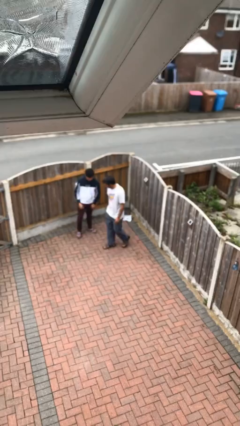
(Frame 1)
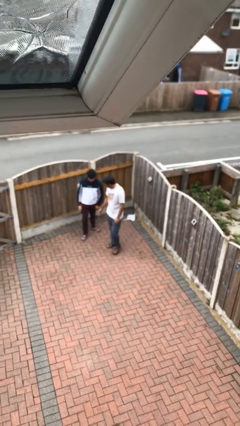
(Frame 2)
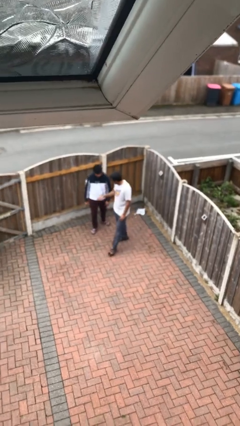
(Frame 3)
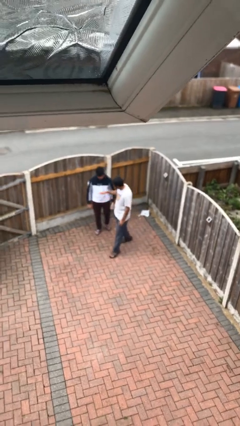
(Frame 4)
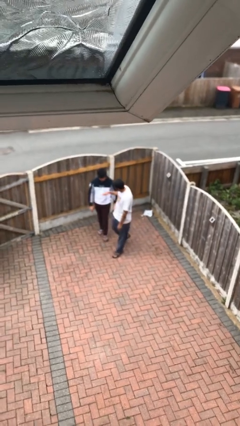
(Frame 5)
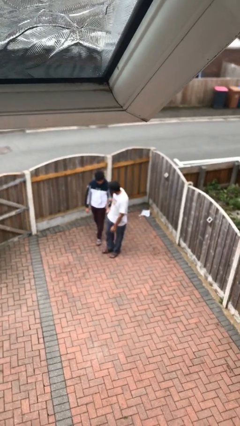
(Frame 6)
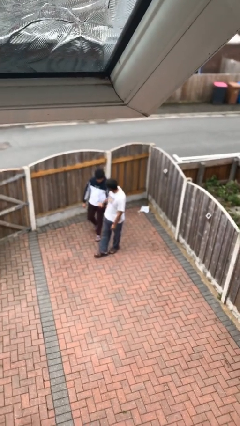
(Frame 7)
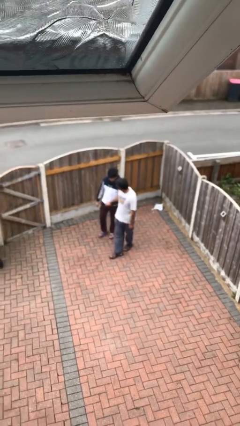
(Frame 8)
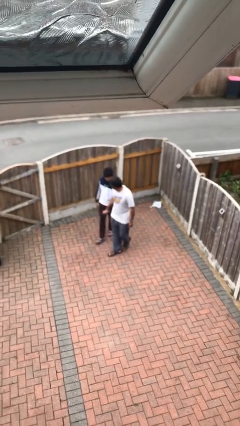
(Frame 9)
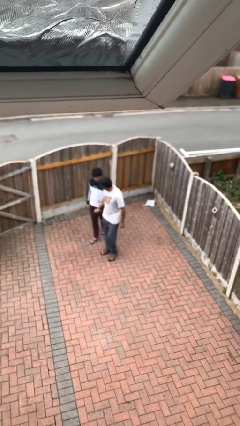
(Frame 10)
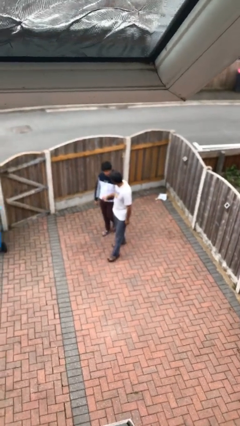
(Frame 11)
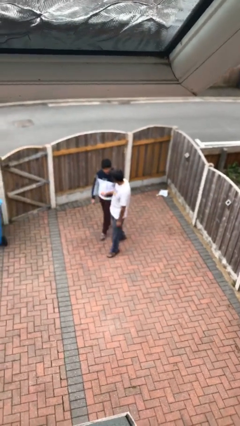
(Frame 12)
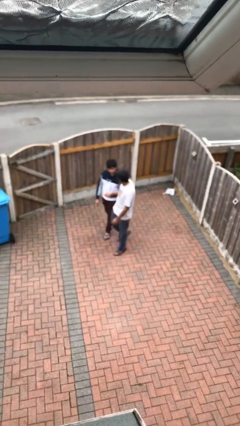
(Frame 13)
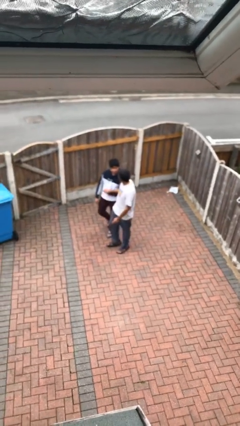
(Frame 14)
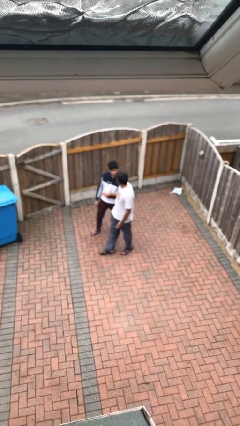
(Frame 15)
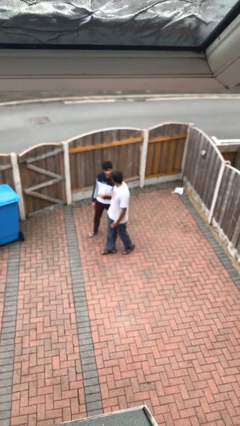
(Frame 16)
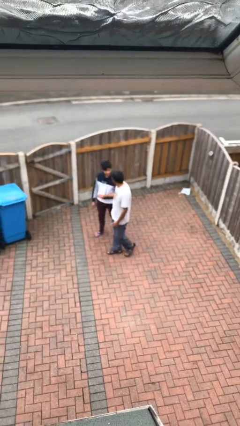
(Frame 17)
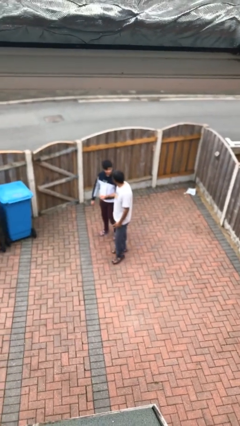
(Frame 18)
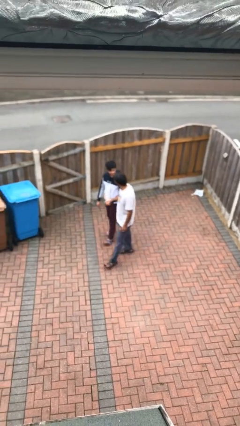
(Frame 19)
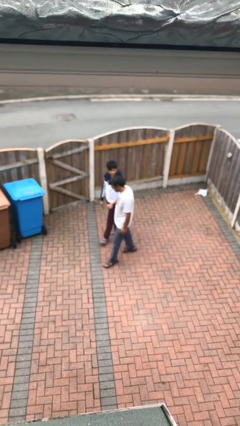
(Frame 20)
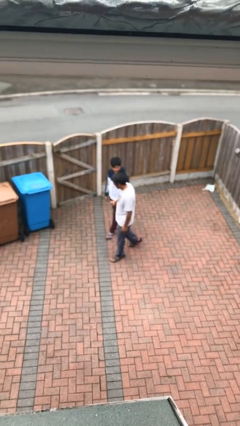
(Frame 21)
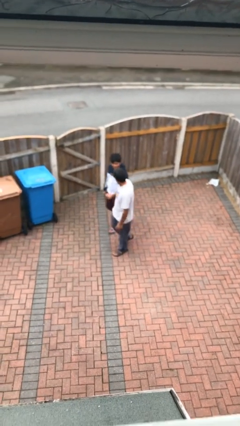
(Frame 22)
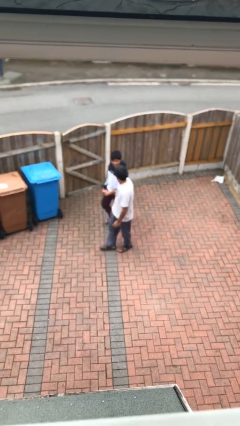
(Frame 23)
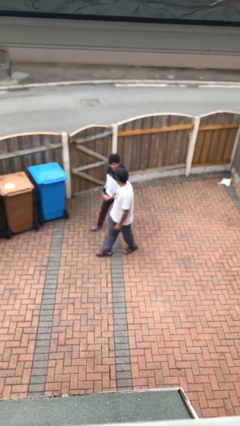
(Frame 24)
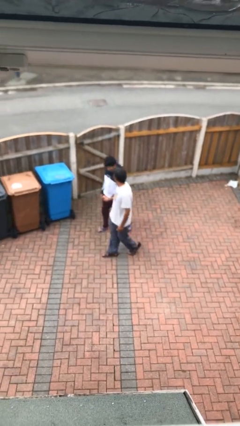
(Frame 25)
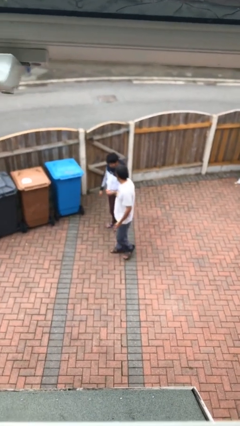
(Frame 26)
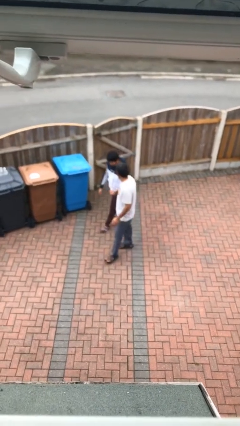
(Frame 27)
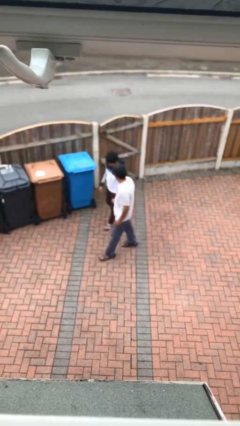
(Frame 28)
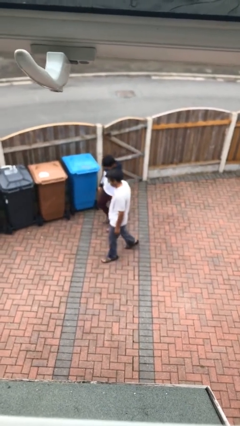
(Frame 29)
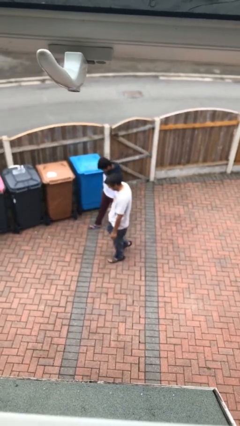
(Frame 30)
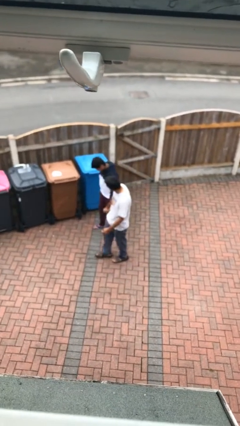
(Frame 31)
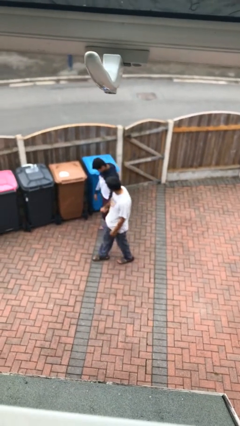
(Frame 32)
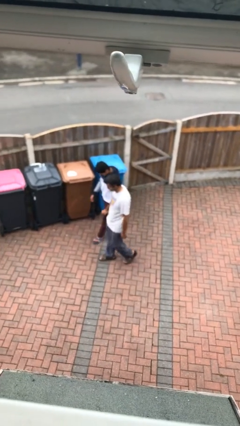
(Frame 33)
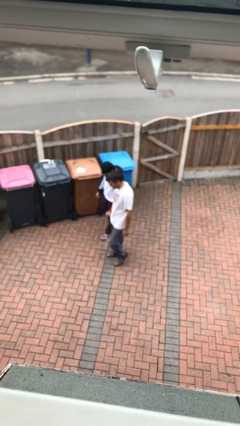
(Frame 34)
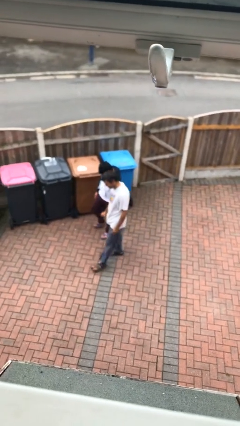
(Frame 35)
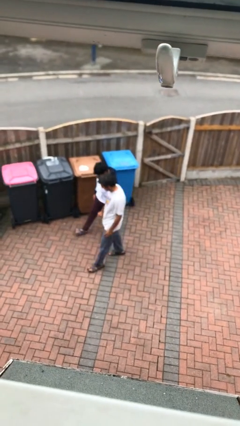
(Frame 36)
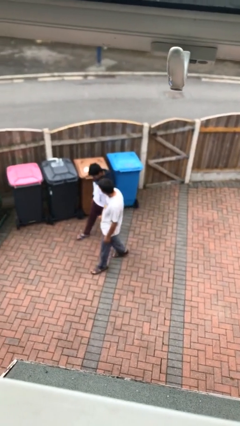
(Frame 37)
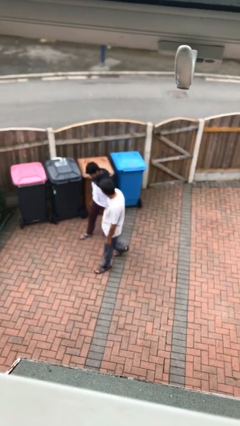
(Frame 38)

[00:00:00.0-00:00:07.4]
person holds hand

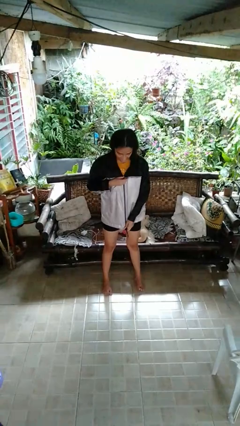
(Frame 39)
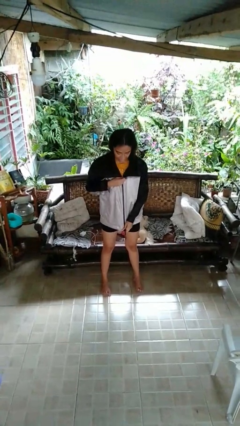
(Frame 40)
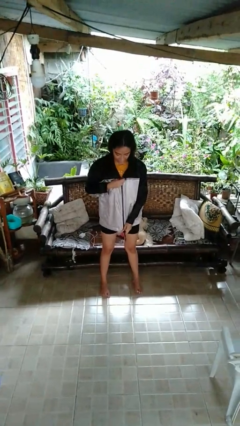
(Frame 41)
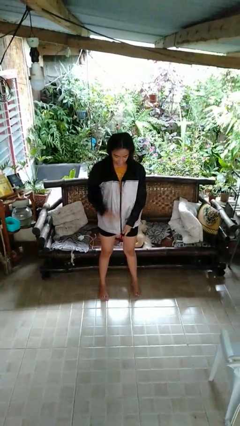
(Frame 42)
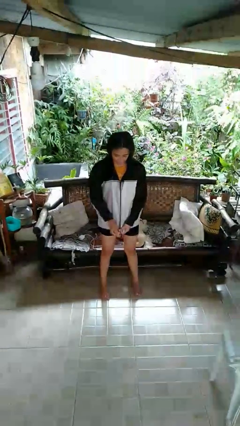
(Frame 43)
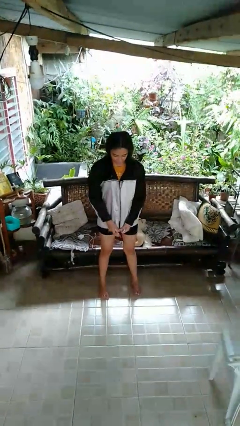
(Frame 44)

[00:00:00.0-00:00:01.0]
person unzips jacket

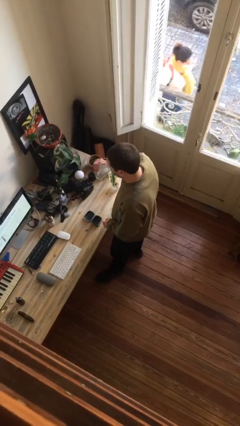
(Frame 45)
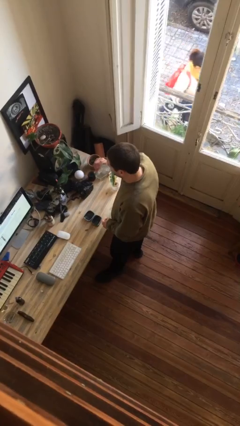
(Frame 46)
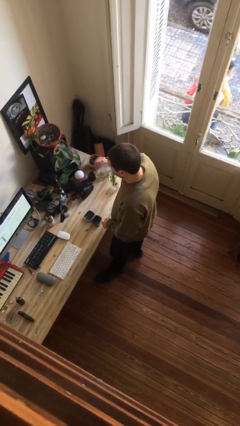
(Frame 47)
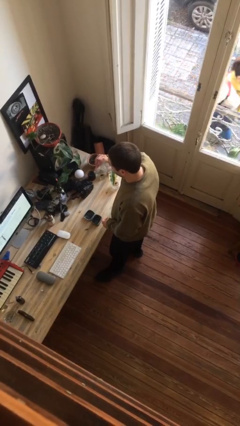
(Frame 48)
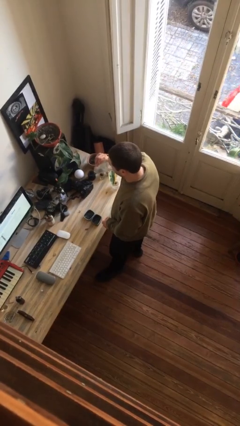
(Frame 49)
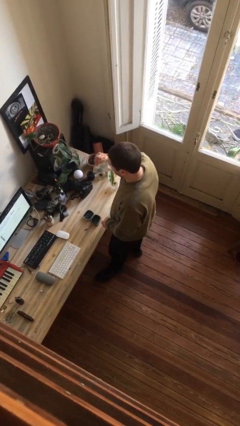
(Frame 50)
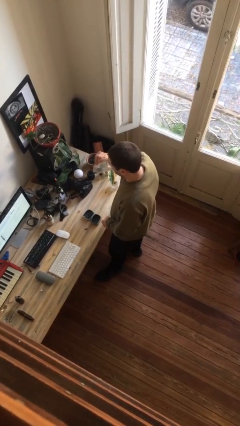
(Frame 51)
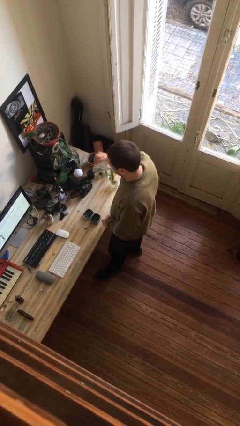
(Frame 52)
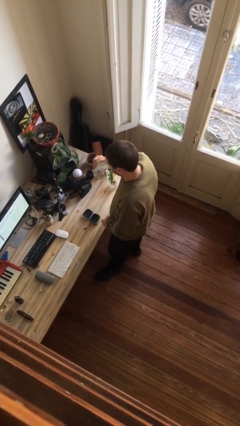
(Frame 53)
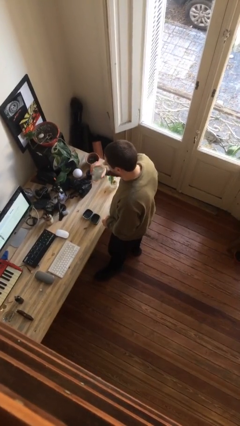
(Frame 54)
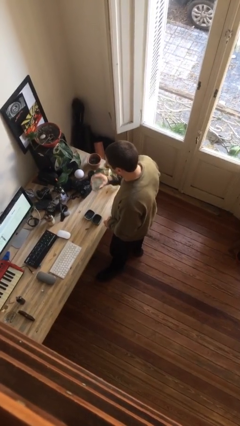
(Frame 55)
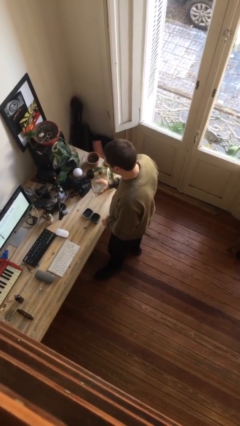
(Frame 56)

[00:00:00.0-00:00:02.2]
person drinks from cup

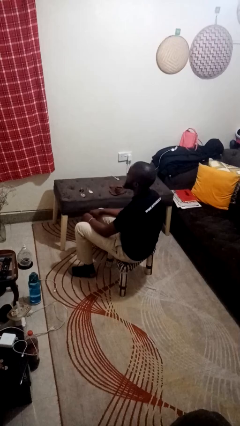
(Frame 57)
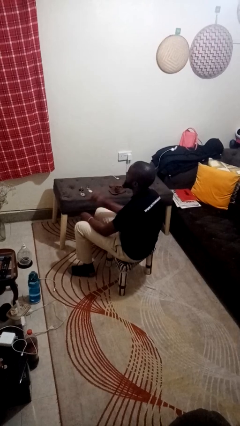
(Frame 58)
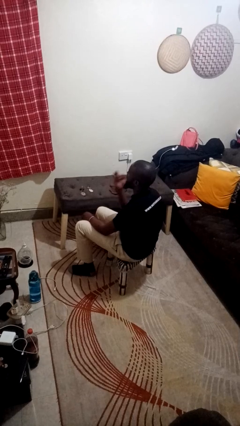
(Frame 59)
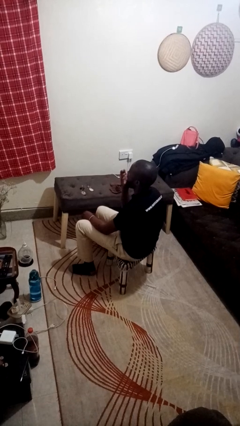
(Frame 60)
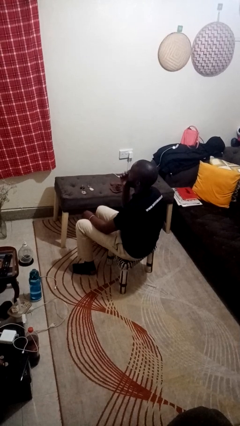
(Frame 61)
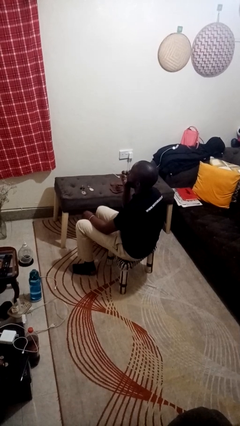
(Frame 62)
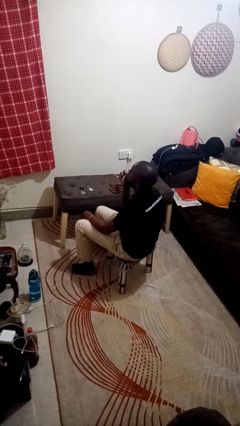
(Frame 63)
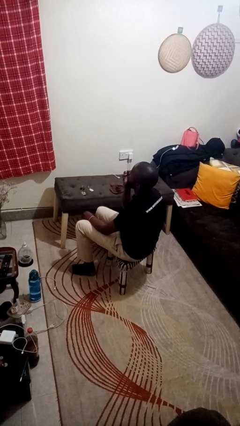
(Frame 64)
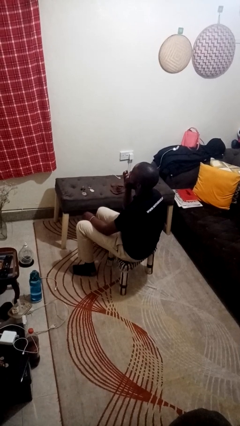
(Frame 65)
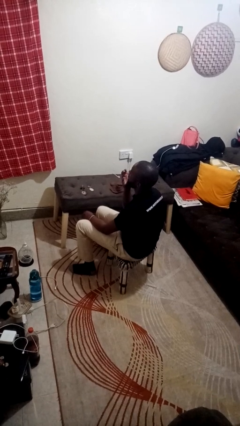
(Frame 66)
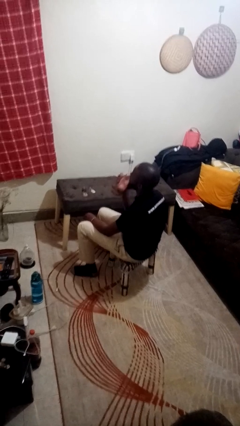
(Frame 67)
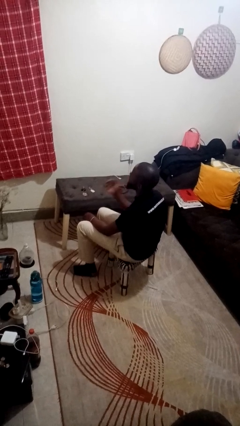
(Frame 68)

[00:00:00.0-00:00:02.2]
person licks fingers

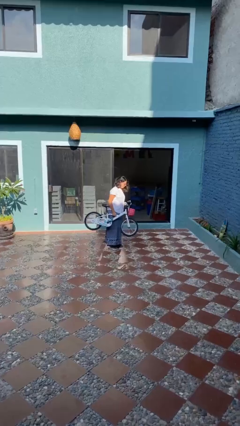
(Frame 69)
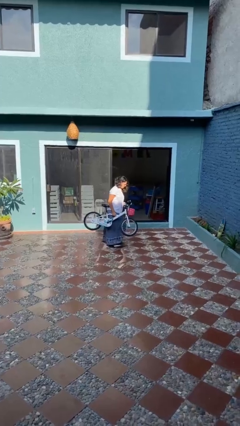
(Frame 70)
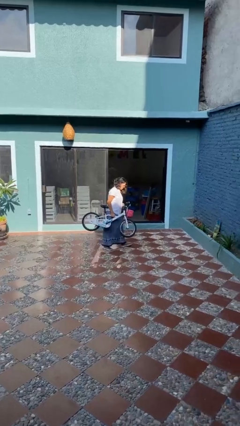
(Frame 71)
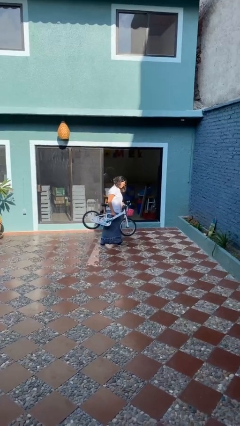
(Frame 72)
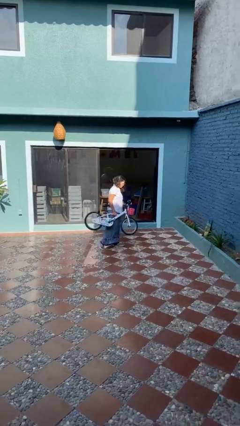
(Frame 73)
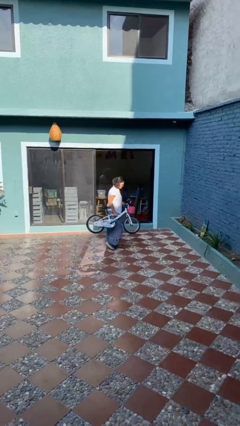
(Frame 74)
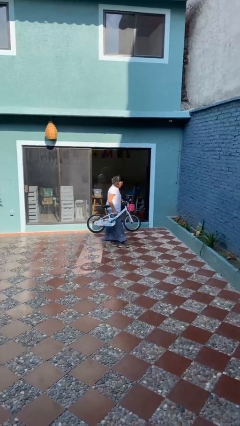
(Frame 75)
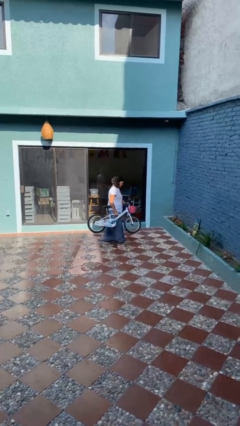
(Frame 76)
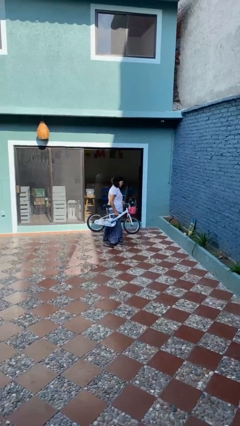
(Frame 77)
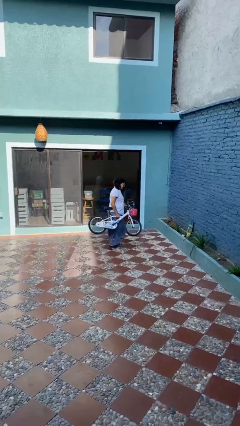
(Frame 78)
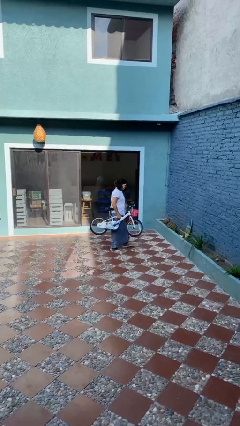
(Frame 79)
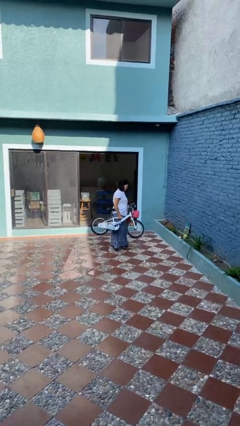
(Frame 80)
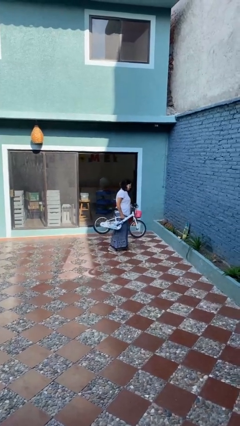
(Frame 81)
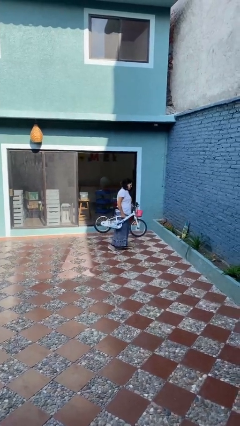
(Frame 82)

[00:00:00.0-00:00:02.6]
person carries bicycle

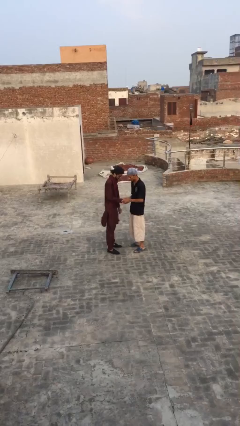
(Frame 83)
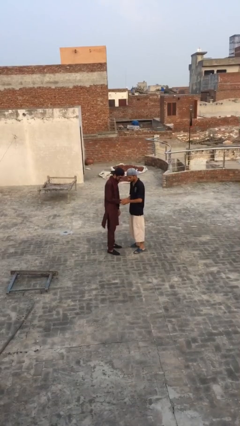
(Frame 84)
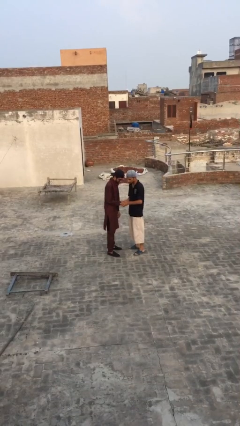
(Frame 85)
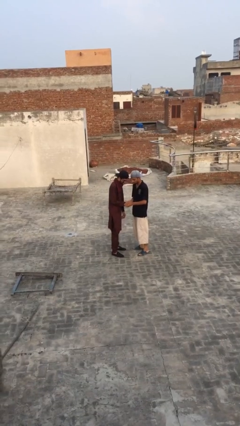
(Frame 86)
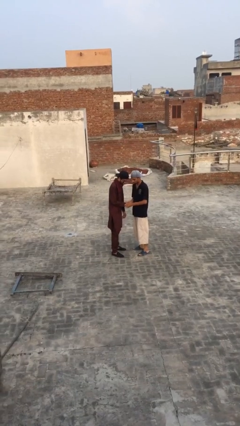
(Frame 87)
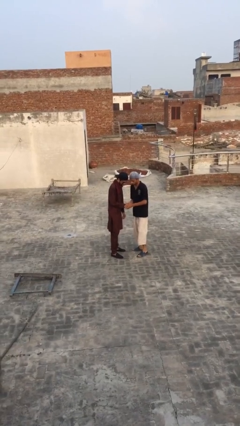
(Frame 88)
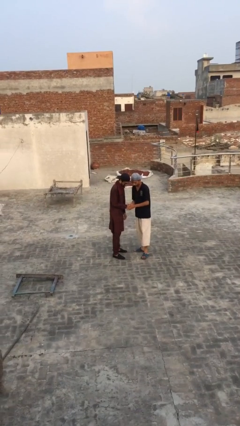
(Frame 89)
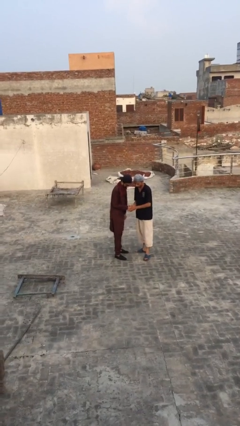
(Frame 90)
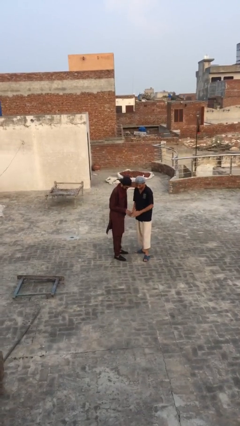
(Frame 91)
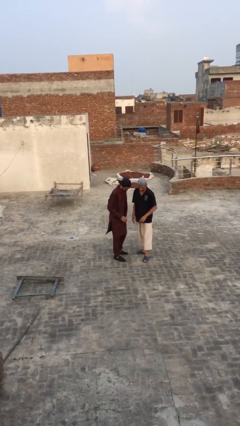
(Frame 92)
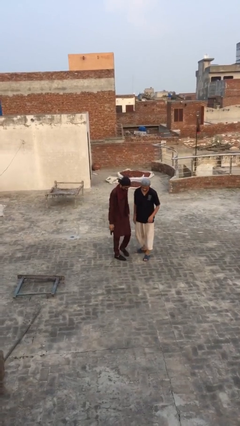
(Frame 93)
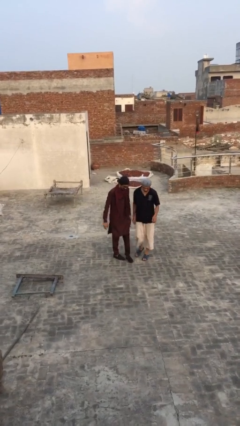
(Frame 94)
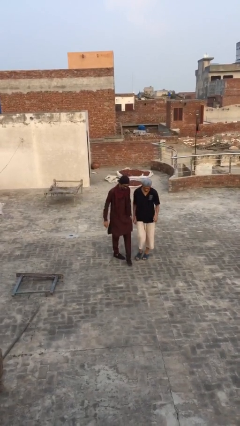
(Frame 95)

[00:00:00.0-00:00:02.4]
person shakes hand
